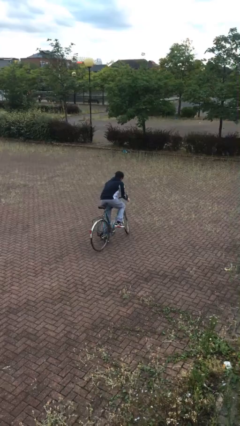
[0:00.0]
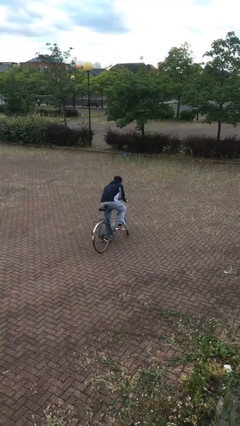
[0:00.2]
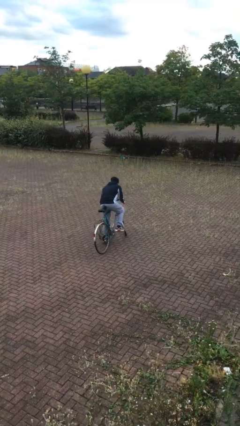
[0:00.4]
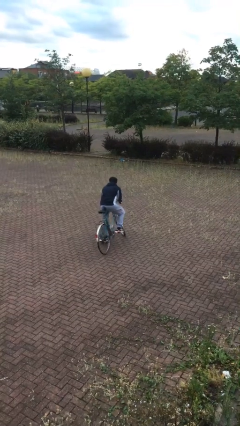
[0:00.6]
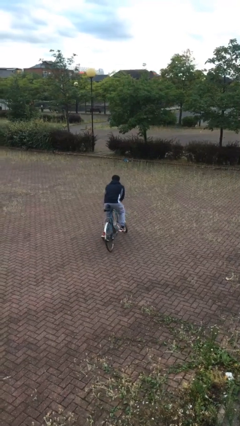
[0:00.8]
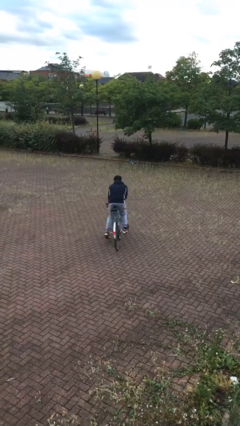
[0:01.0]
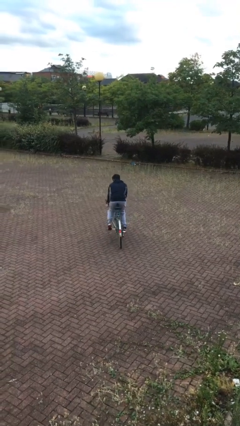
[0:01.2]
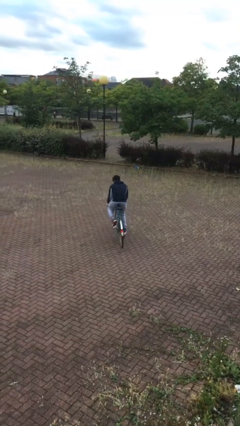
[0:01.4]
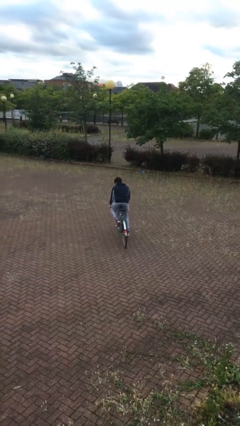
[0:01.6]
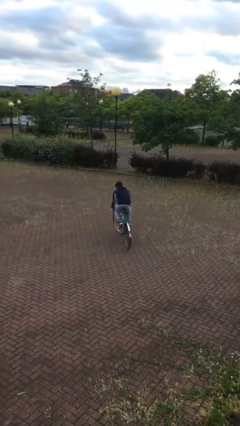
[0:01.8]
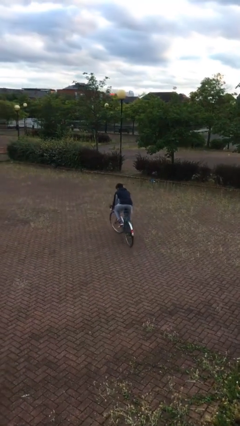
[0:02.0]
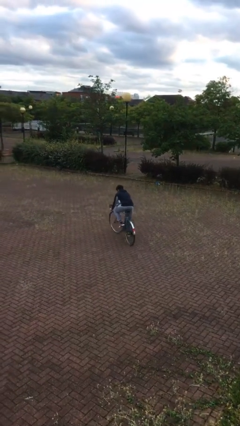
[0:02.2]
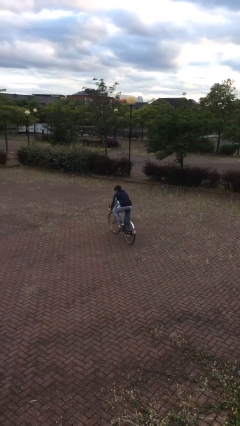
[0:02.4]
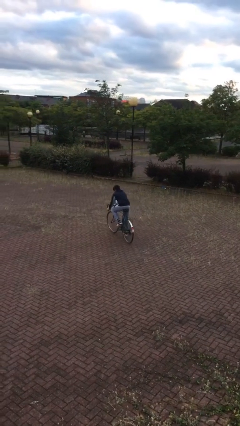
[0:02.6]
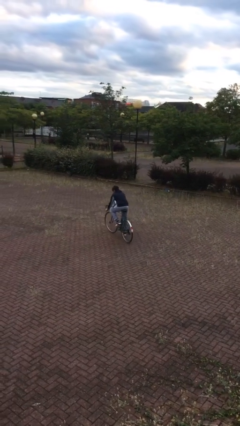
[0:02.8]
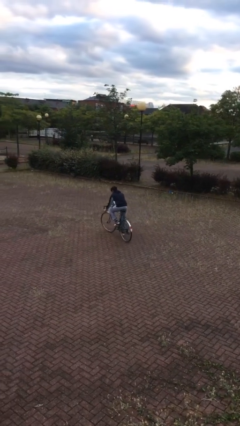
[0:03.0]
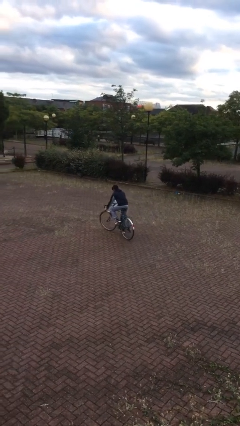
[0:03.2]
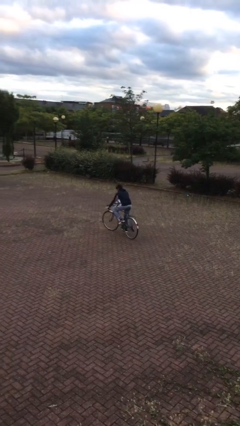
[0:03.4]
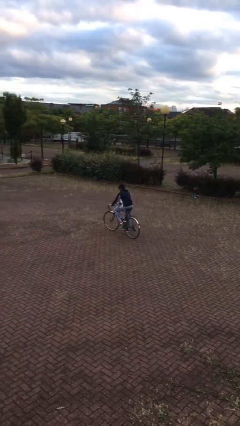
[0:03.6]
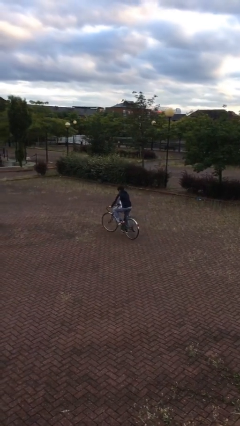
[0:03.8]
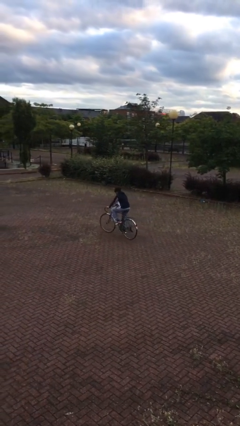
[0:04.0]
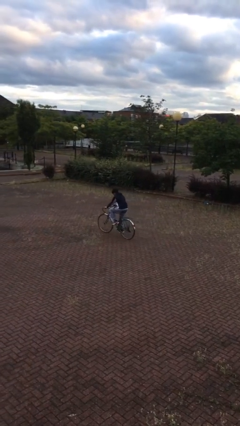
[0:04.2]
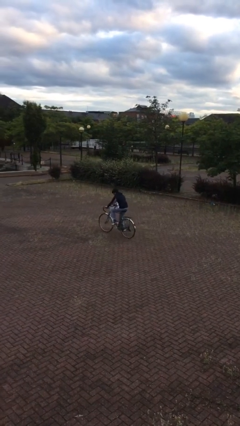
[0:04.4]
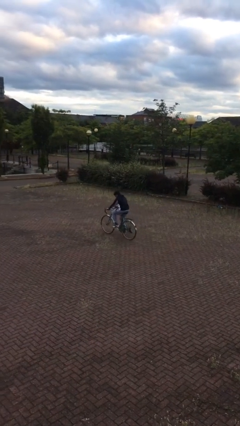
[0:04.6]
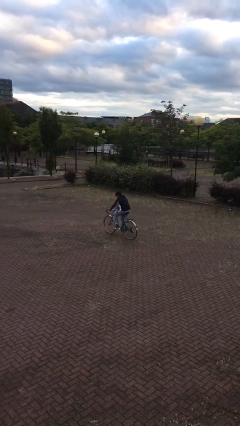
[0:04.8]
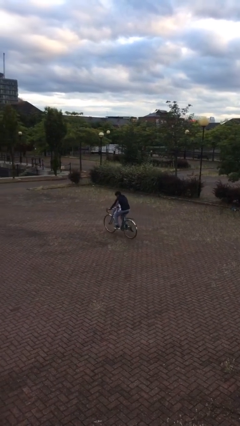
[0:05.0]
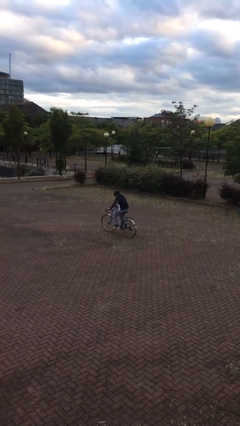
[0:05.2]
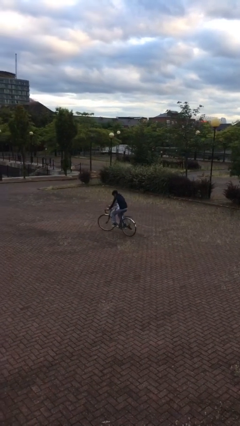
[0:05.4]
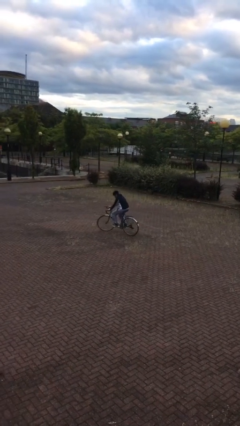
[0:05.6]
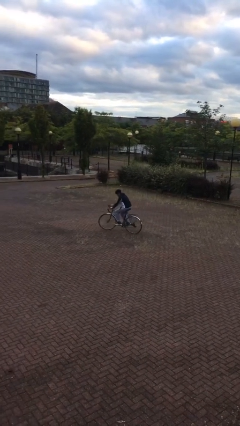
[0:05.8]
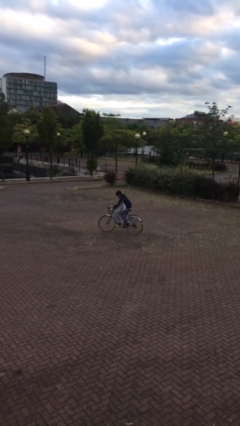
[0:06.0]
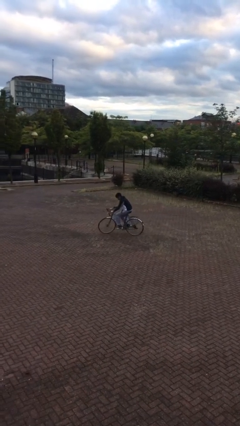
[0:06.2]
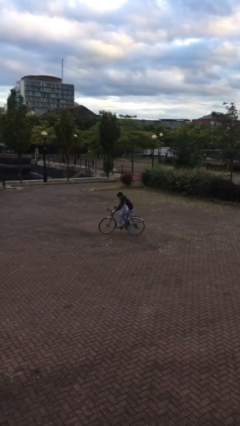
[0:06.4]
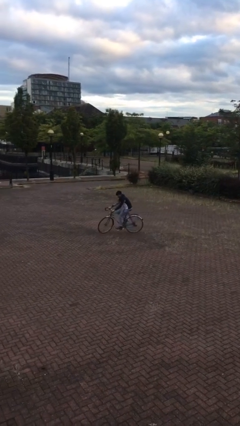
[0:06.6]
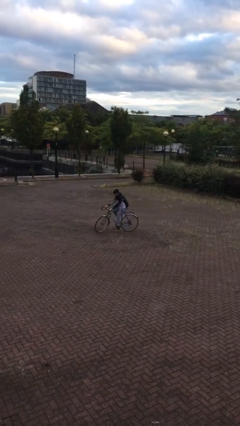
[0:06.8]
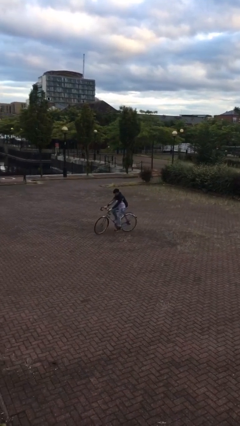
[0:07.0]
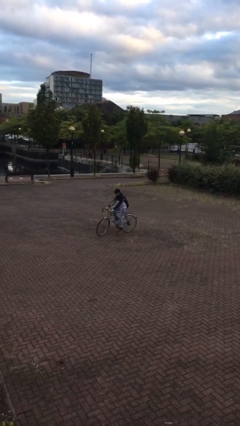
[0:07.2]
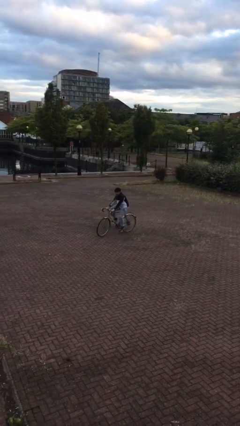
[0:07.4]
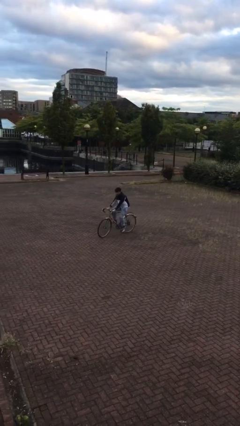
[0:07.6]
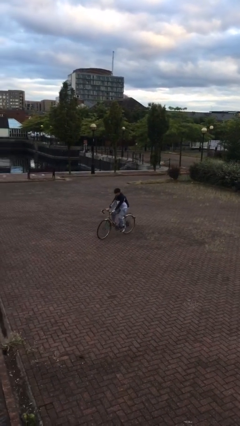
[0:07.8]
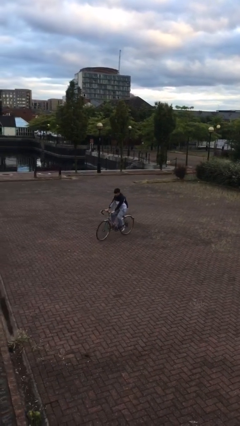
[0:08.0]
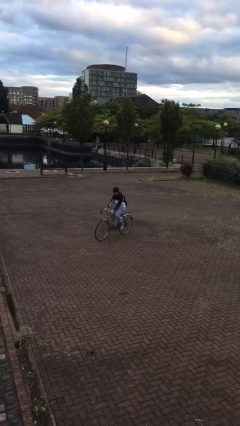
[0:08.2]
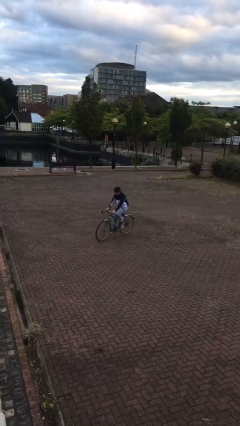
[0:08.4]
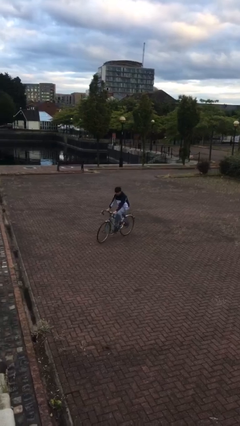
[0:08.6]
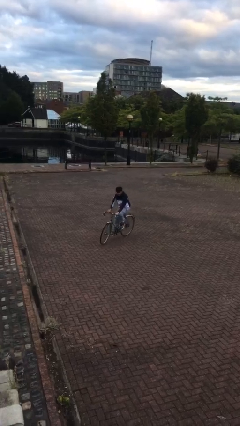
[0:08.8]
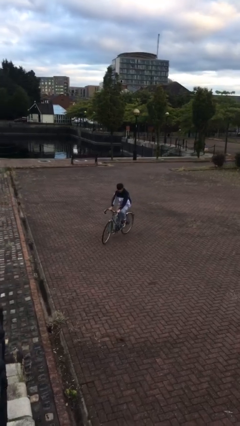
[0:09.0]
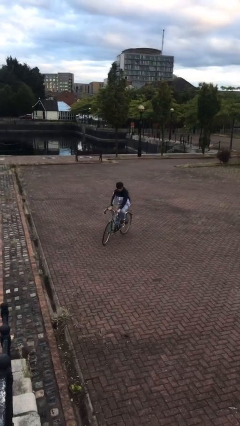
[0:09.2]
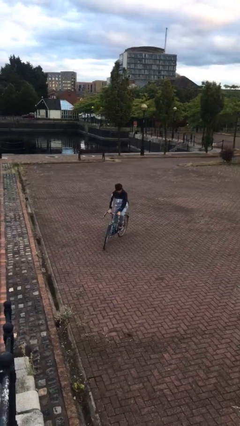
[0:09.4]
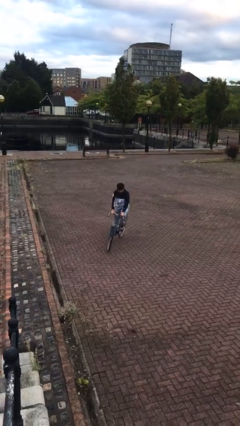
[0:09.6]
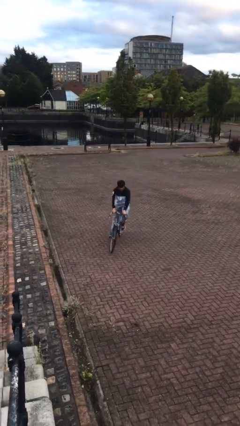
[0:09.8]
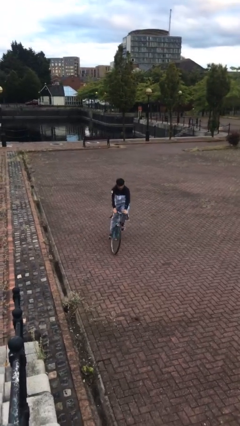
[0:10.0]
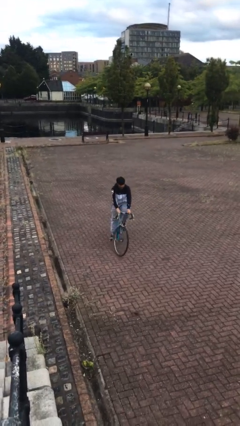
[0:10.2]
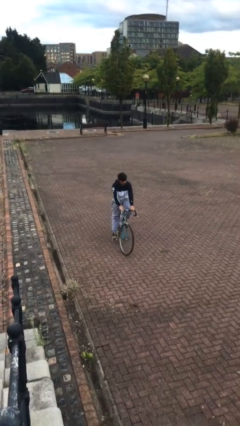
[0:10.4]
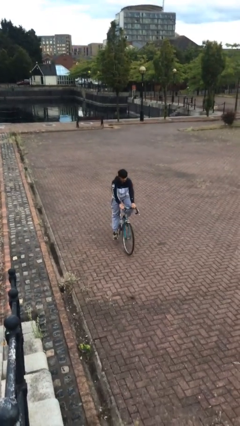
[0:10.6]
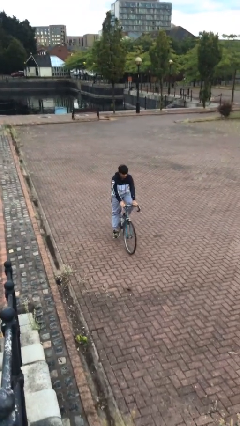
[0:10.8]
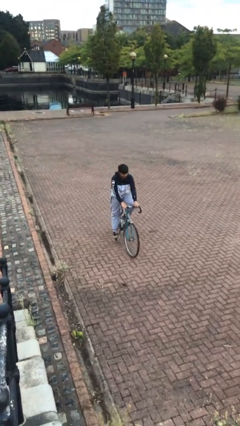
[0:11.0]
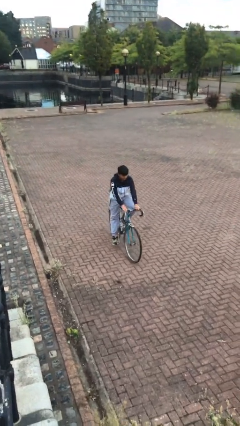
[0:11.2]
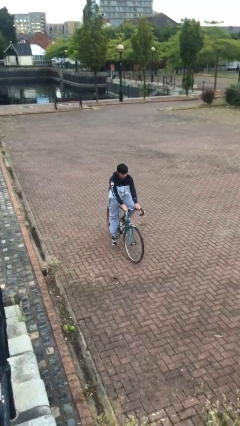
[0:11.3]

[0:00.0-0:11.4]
person rides bicycle

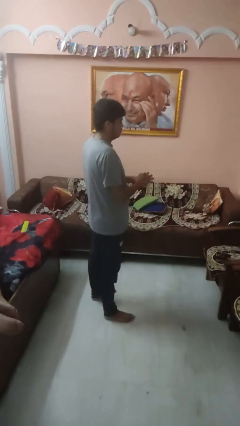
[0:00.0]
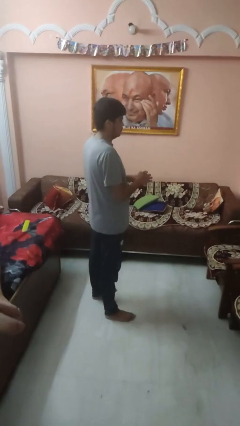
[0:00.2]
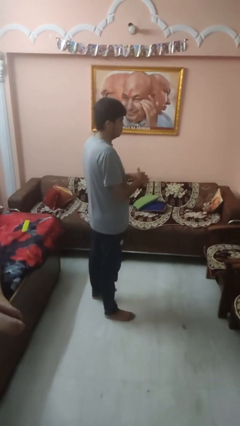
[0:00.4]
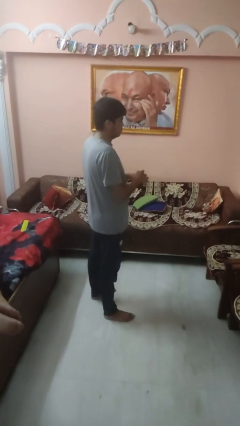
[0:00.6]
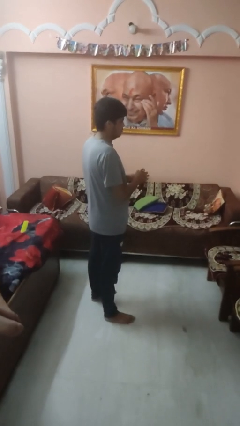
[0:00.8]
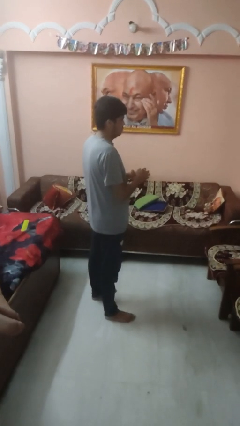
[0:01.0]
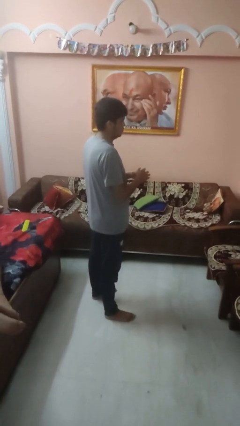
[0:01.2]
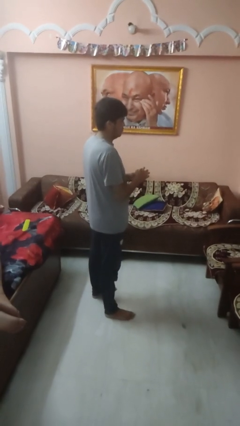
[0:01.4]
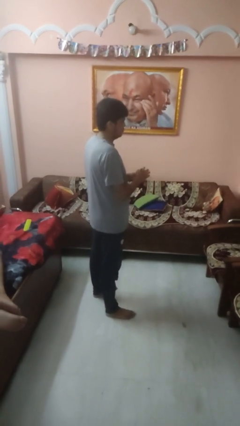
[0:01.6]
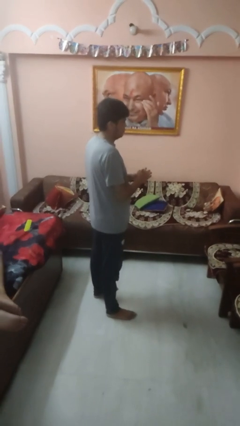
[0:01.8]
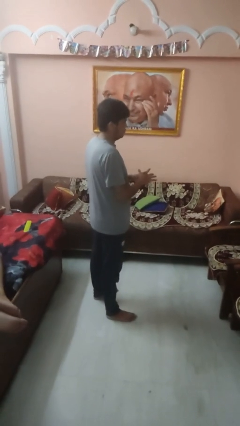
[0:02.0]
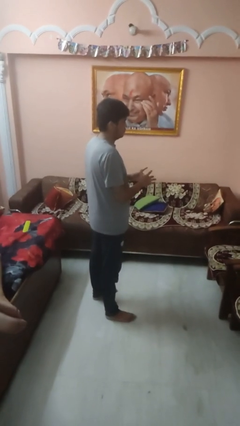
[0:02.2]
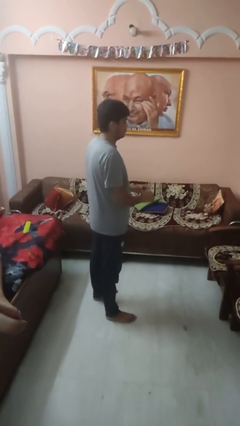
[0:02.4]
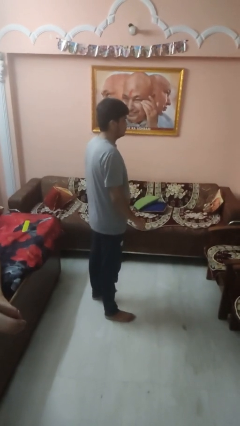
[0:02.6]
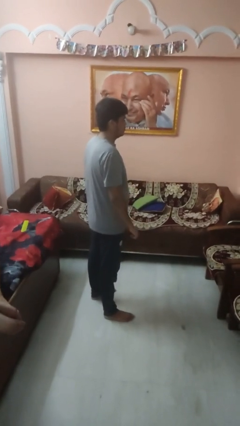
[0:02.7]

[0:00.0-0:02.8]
person cracks knuckles

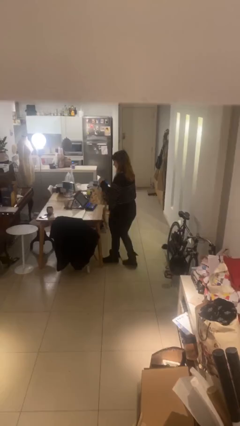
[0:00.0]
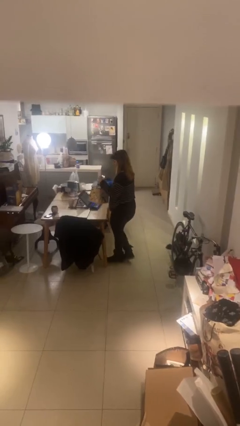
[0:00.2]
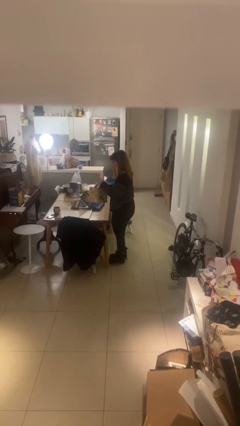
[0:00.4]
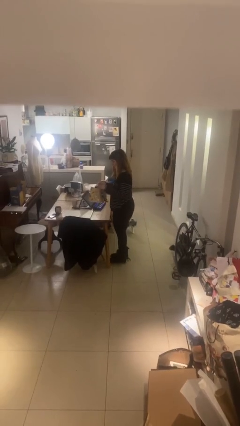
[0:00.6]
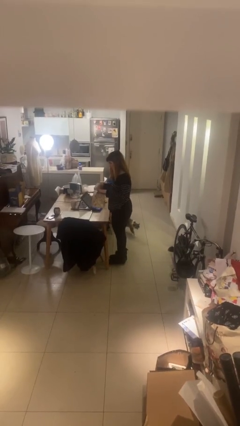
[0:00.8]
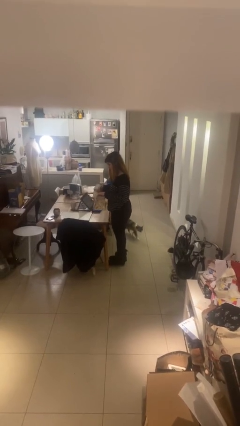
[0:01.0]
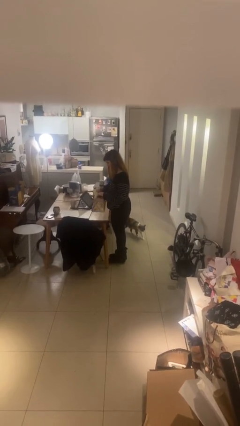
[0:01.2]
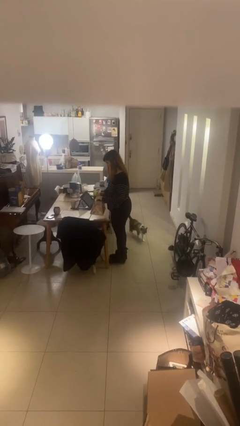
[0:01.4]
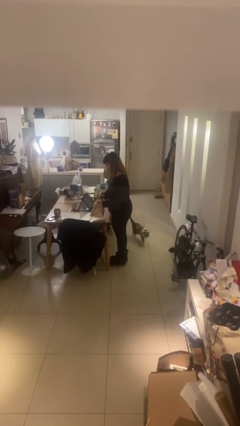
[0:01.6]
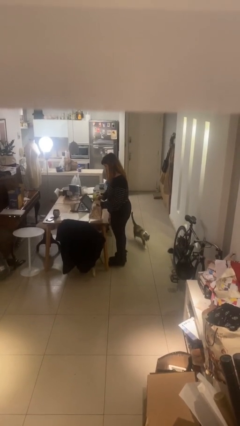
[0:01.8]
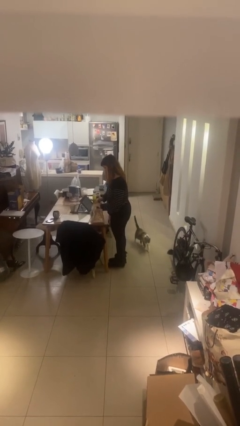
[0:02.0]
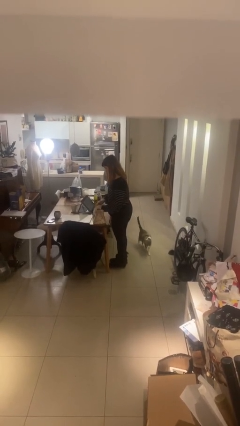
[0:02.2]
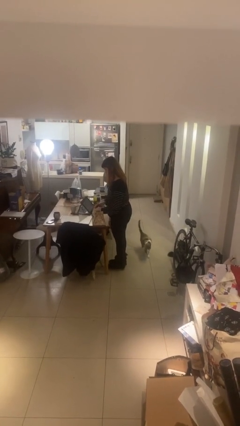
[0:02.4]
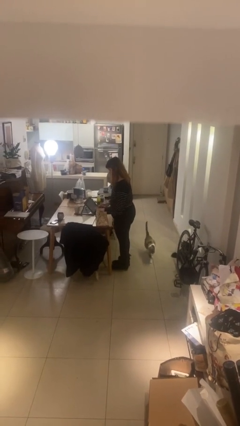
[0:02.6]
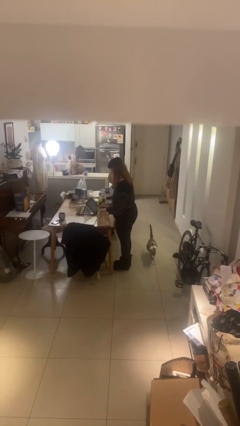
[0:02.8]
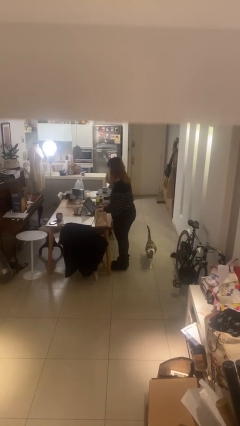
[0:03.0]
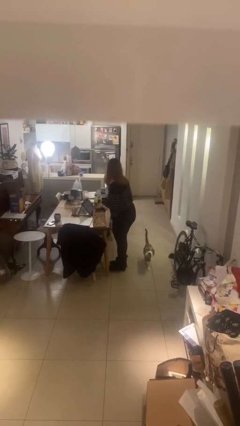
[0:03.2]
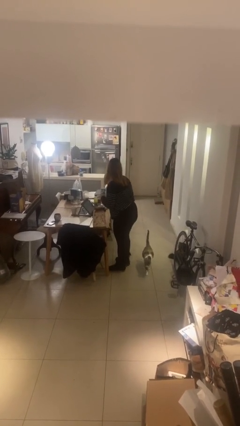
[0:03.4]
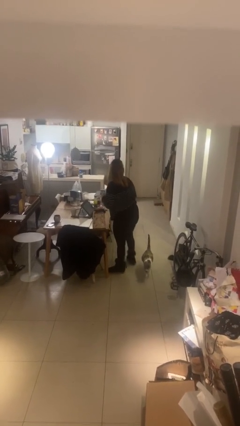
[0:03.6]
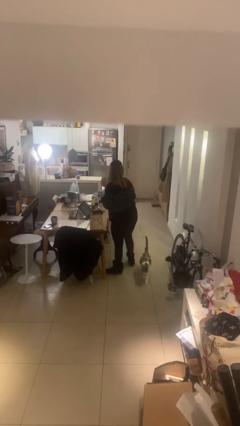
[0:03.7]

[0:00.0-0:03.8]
person puts down object on table
